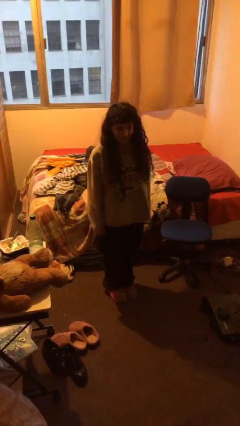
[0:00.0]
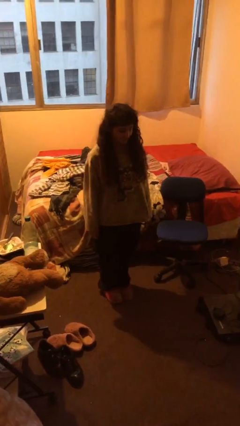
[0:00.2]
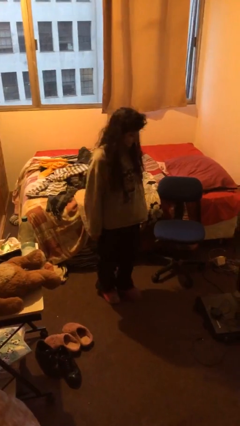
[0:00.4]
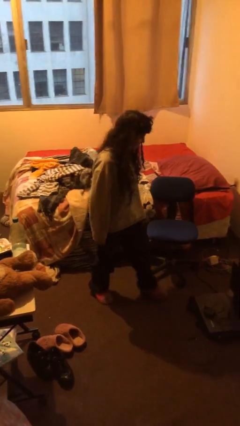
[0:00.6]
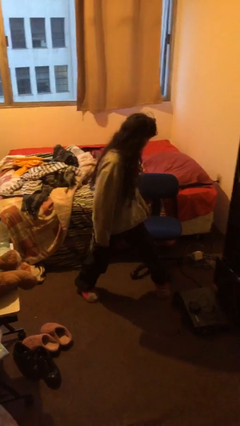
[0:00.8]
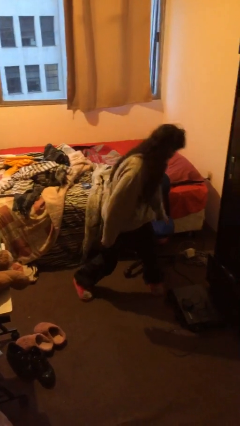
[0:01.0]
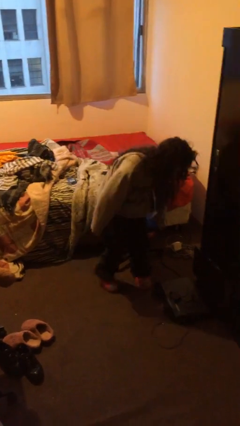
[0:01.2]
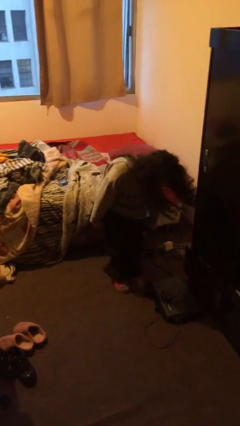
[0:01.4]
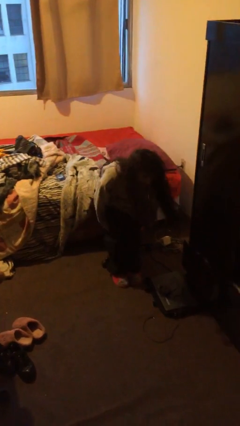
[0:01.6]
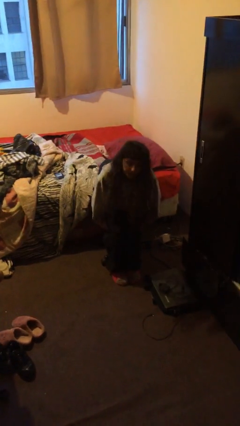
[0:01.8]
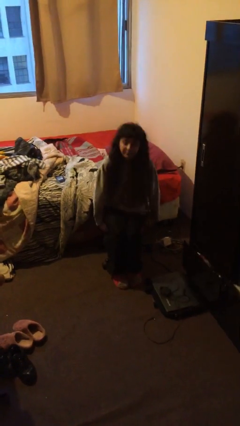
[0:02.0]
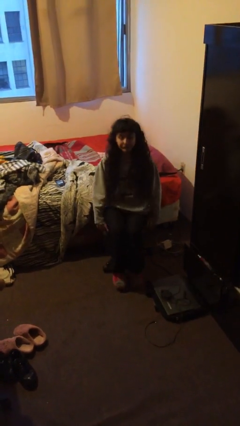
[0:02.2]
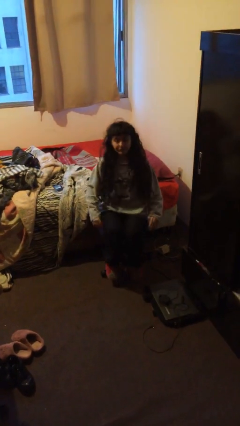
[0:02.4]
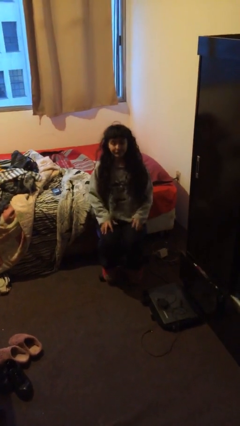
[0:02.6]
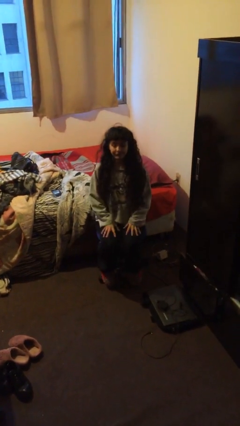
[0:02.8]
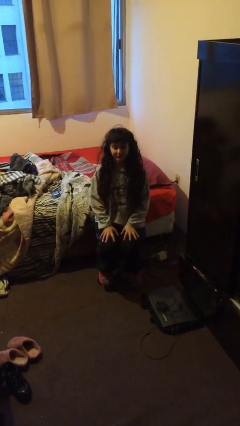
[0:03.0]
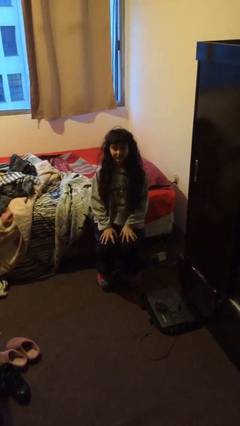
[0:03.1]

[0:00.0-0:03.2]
person sits down

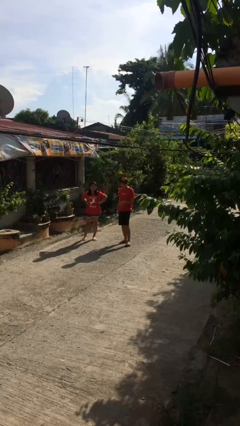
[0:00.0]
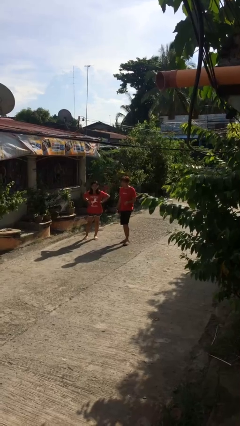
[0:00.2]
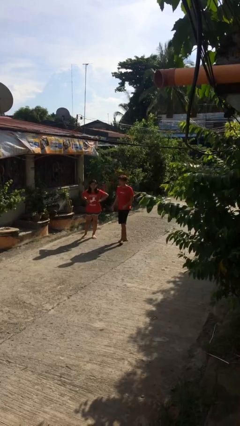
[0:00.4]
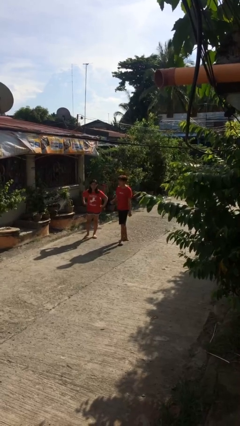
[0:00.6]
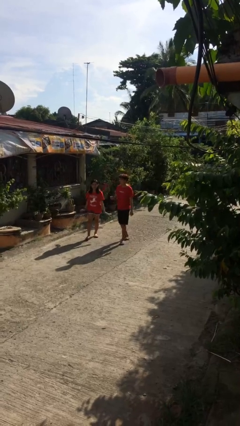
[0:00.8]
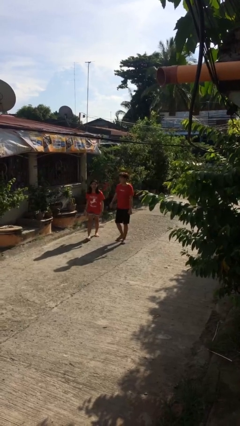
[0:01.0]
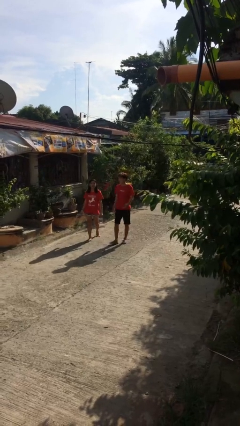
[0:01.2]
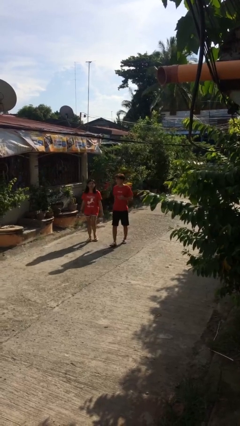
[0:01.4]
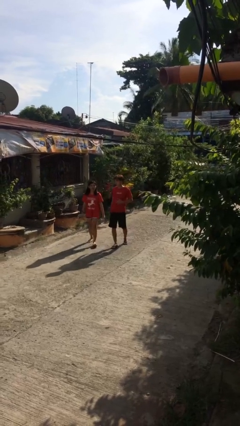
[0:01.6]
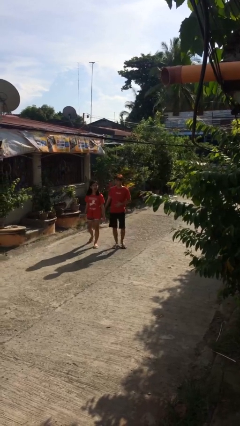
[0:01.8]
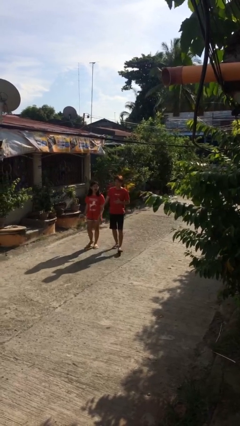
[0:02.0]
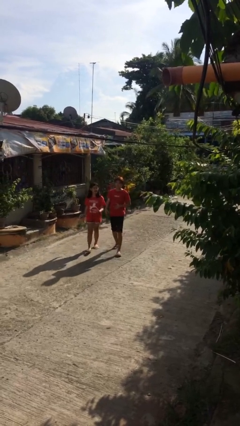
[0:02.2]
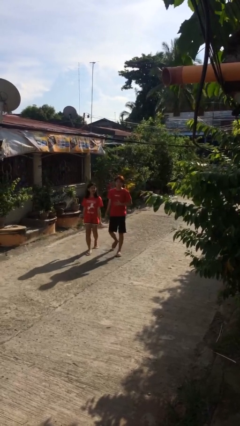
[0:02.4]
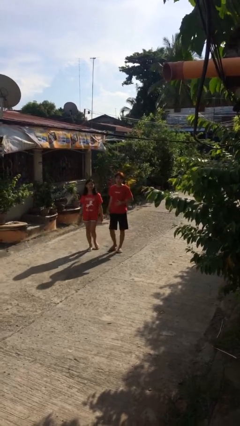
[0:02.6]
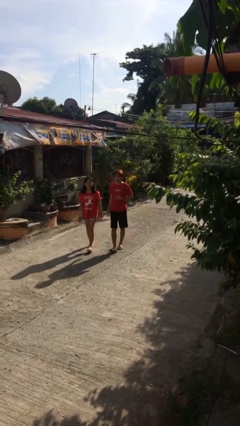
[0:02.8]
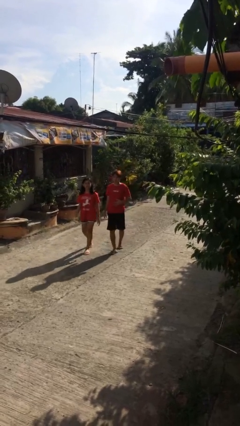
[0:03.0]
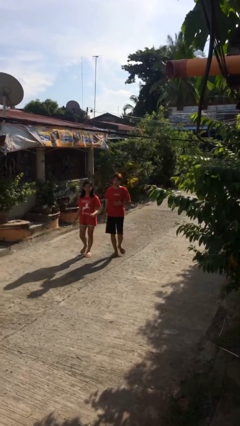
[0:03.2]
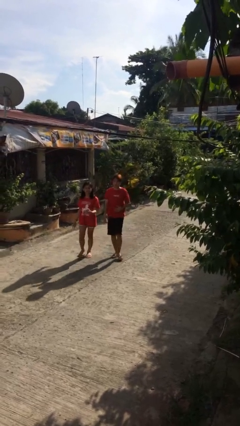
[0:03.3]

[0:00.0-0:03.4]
person talks to person

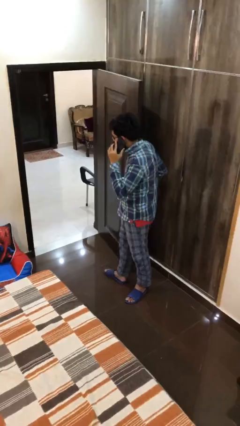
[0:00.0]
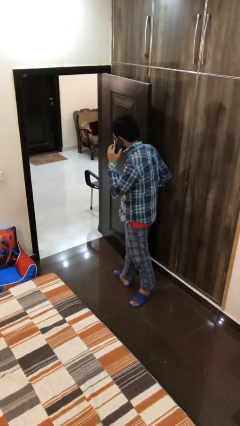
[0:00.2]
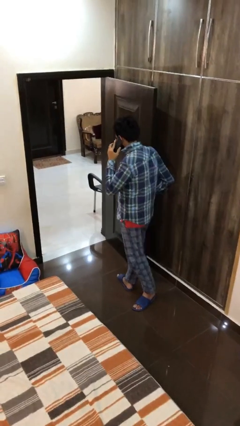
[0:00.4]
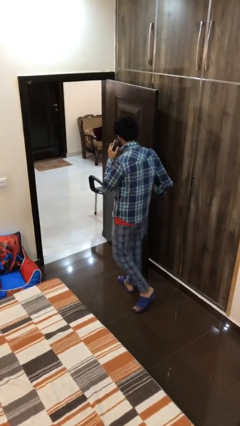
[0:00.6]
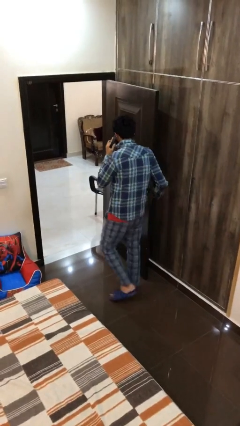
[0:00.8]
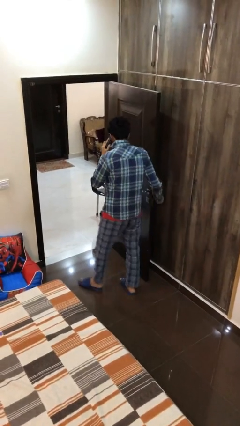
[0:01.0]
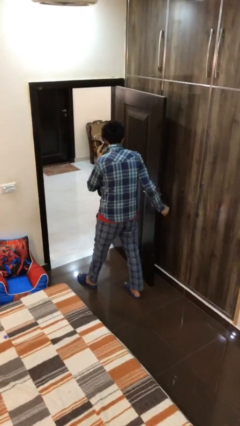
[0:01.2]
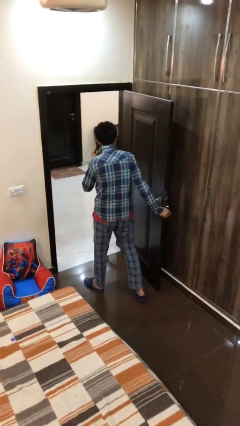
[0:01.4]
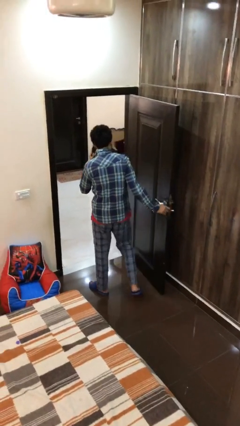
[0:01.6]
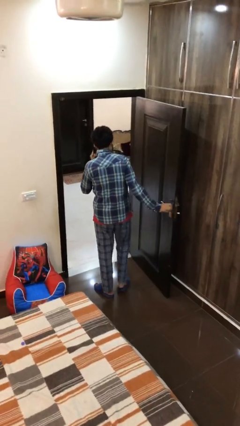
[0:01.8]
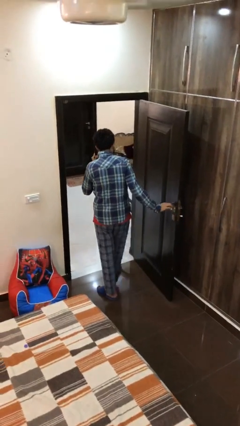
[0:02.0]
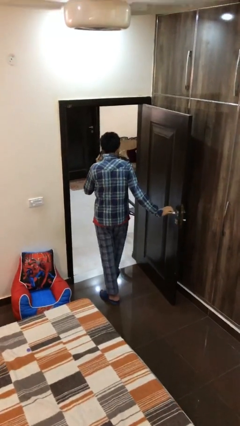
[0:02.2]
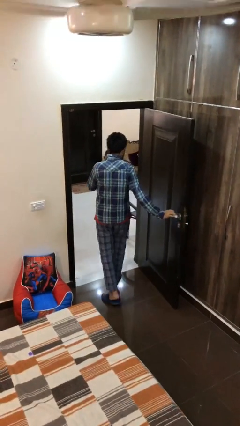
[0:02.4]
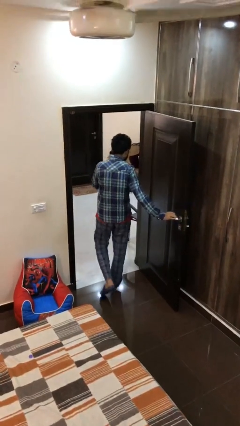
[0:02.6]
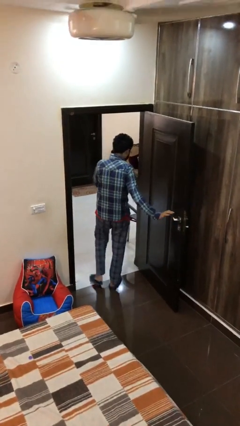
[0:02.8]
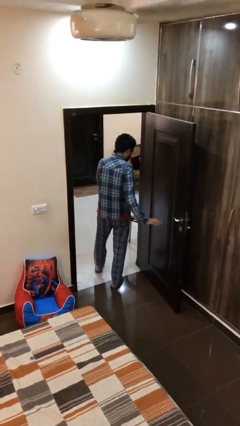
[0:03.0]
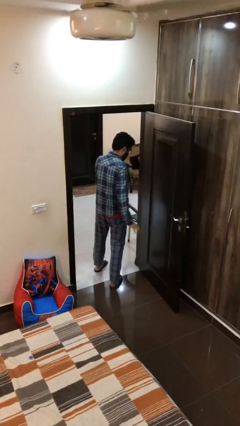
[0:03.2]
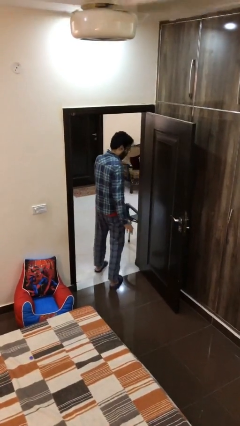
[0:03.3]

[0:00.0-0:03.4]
person exits scene through structure

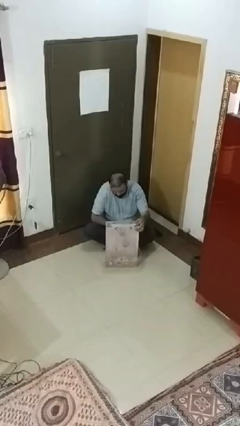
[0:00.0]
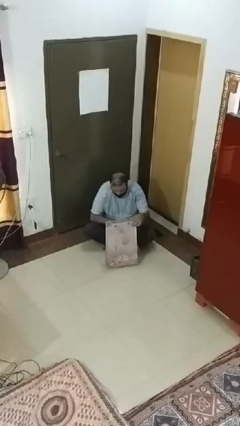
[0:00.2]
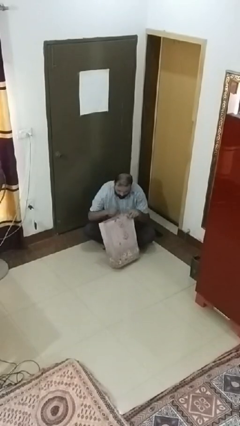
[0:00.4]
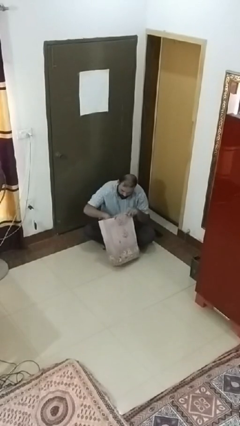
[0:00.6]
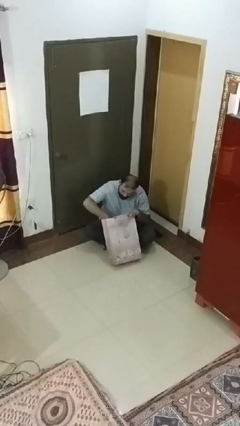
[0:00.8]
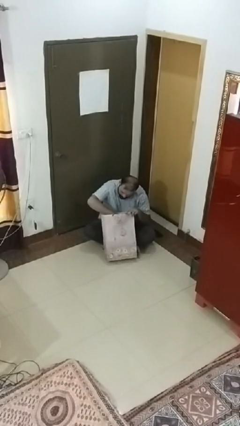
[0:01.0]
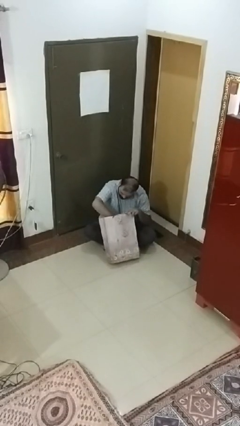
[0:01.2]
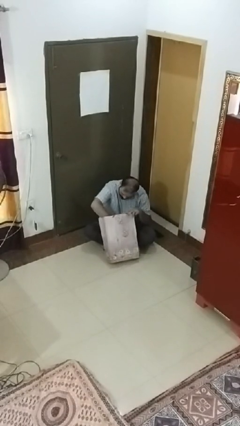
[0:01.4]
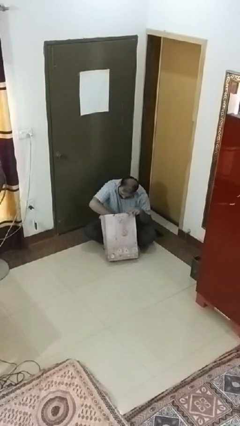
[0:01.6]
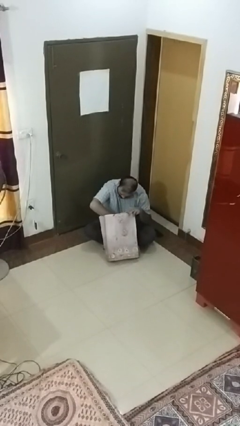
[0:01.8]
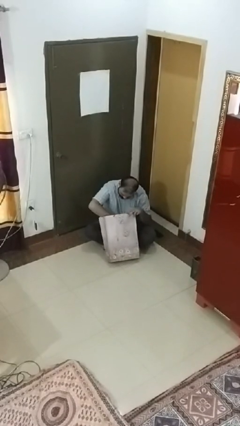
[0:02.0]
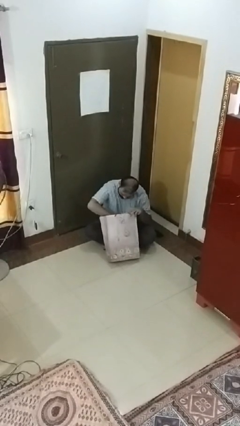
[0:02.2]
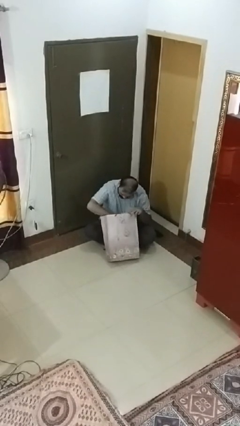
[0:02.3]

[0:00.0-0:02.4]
person searches under bed

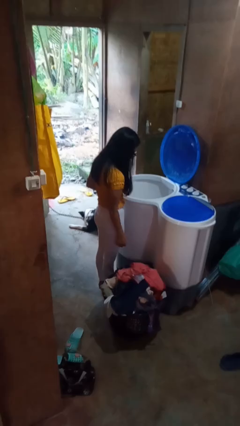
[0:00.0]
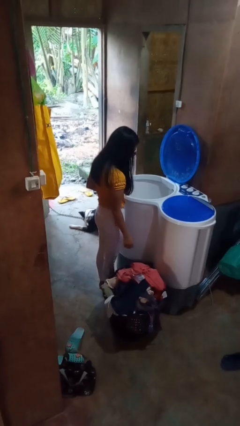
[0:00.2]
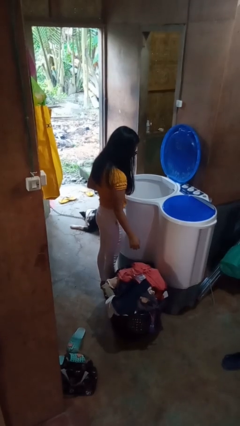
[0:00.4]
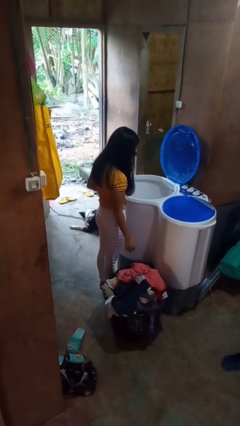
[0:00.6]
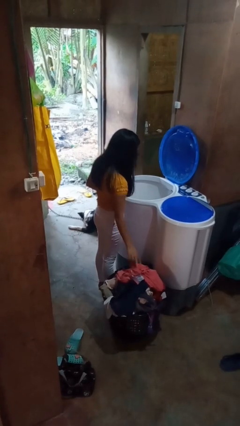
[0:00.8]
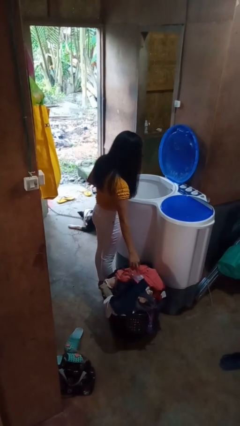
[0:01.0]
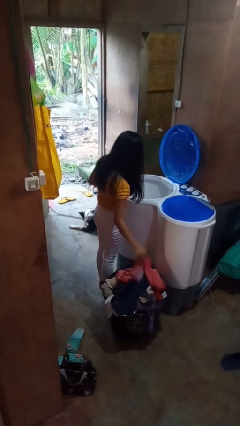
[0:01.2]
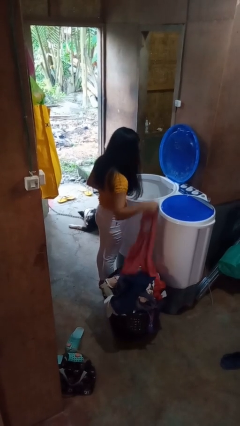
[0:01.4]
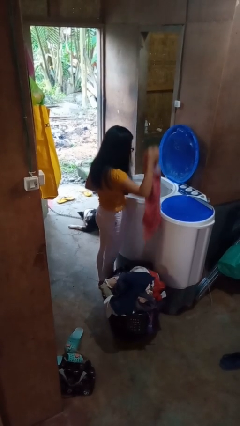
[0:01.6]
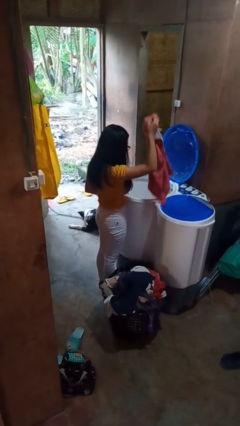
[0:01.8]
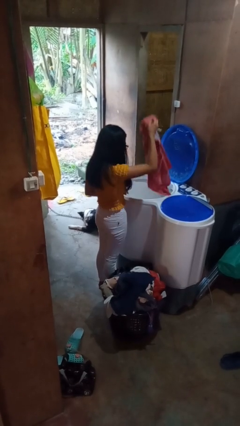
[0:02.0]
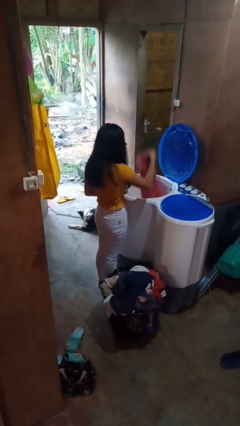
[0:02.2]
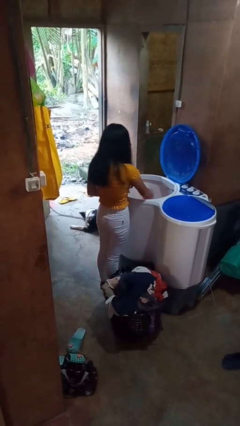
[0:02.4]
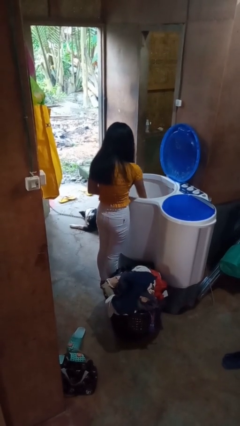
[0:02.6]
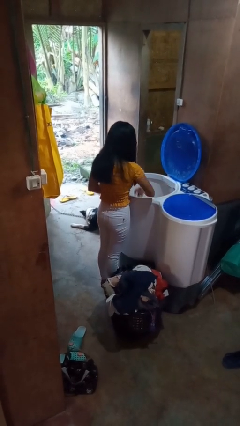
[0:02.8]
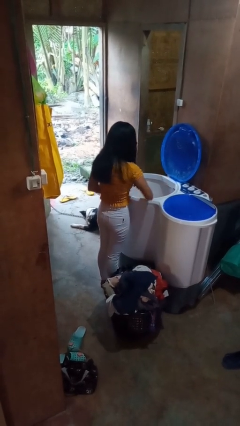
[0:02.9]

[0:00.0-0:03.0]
person loads clotheswasher

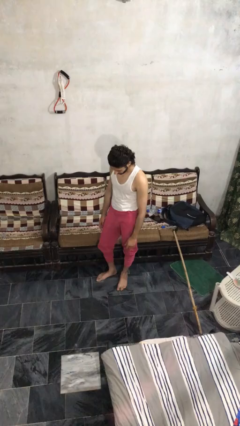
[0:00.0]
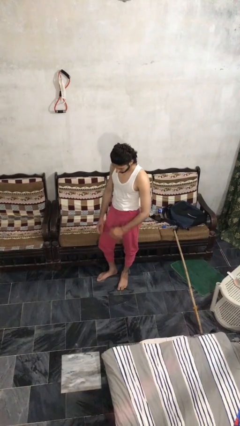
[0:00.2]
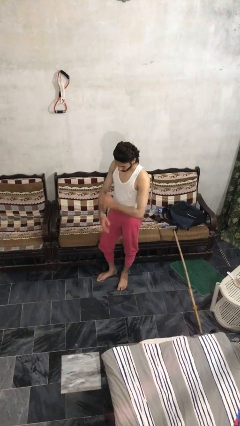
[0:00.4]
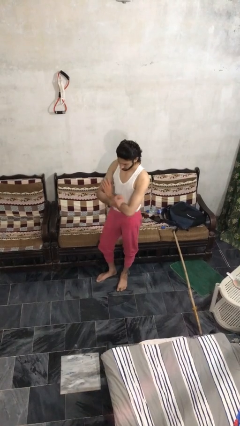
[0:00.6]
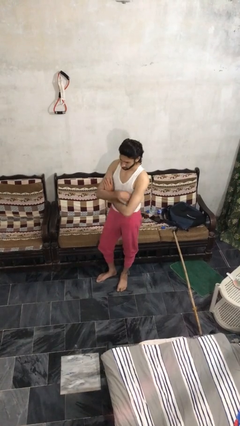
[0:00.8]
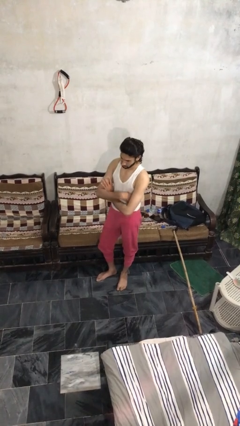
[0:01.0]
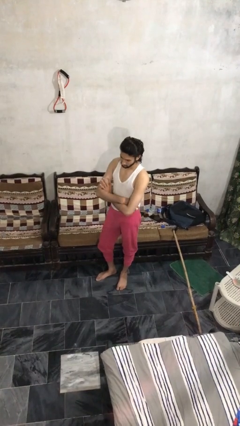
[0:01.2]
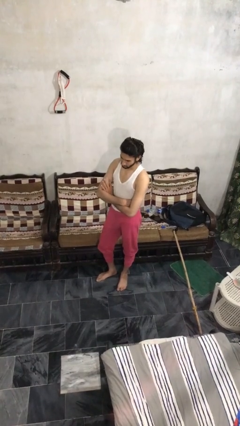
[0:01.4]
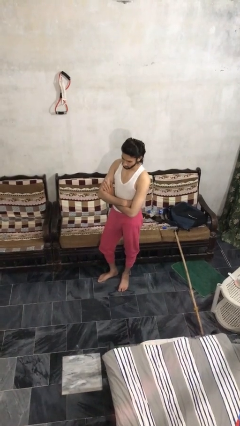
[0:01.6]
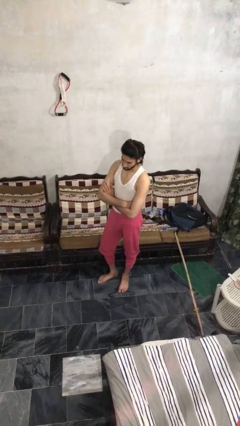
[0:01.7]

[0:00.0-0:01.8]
person crosses arms
